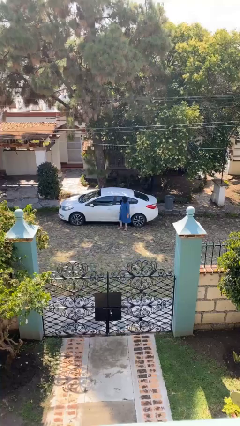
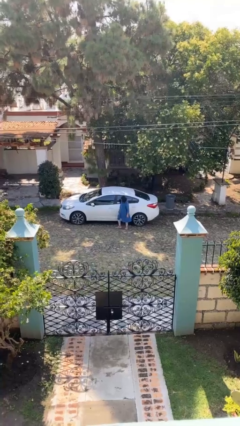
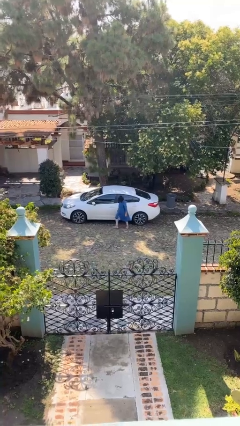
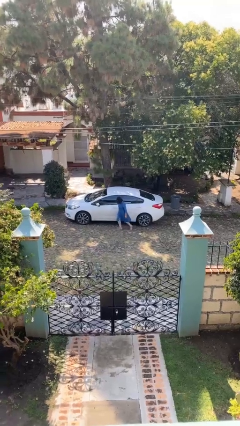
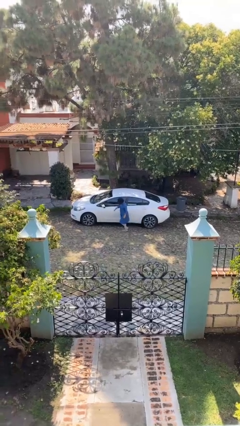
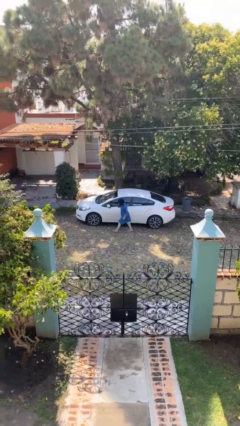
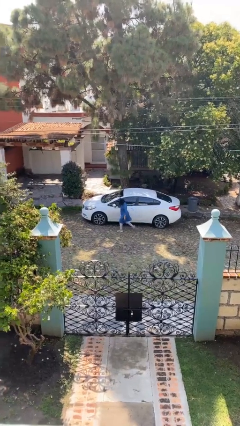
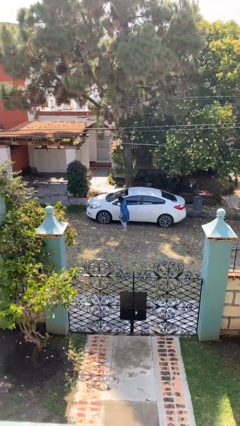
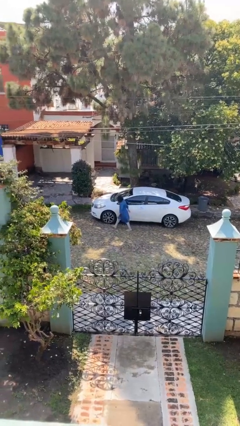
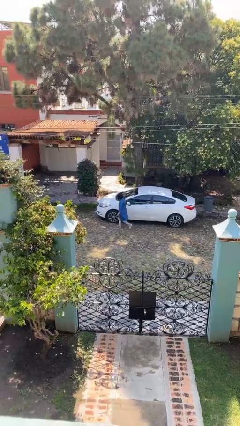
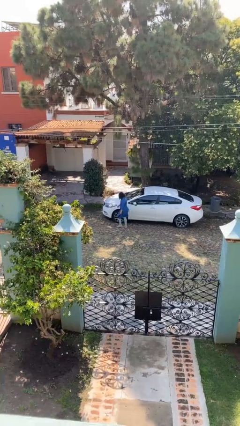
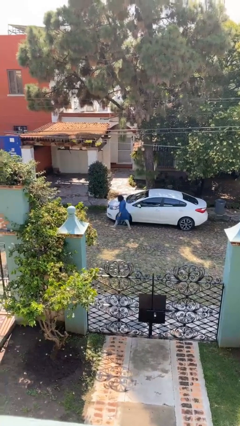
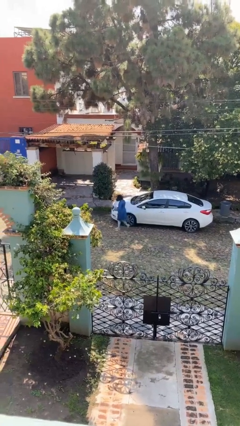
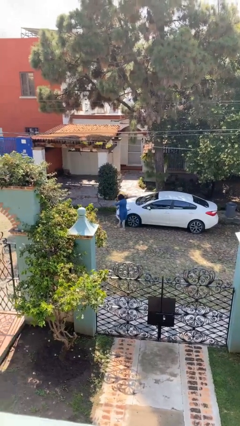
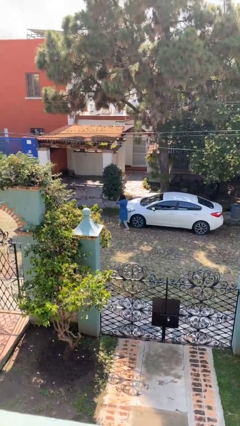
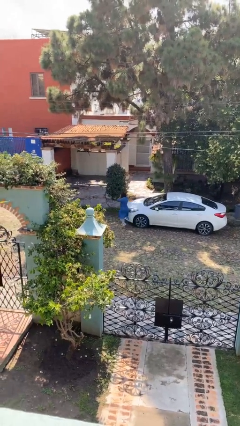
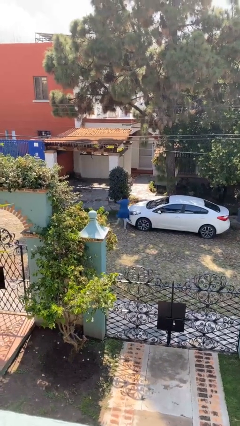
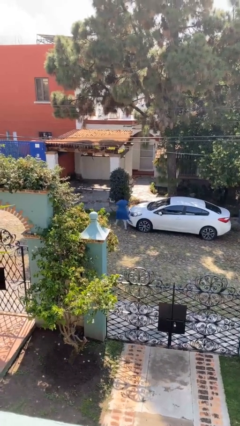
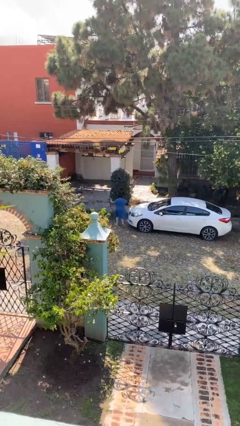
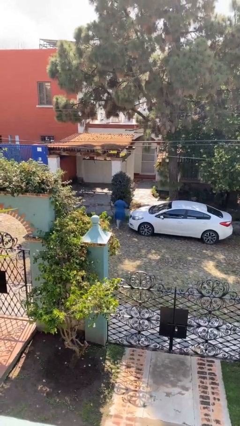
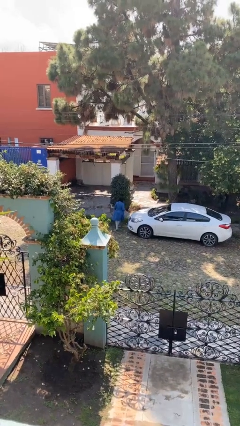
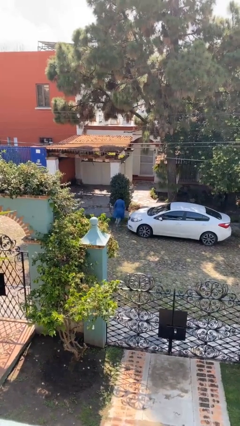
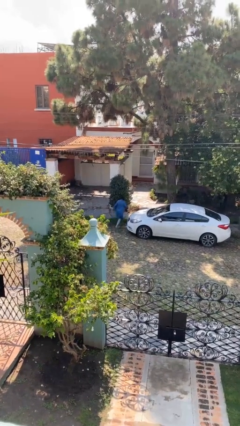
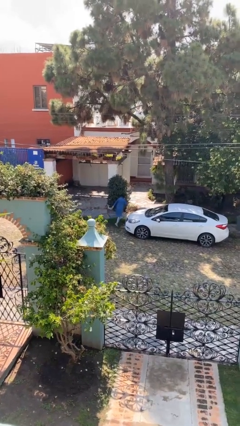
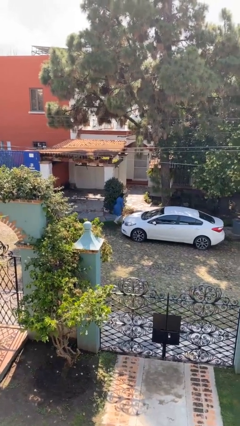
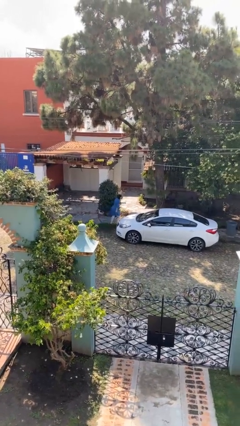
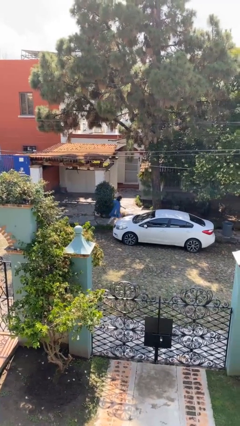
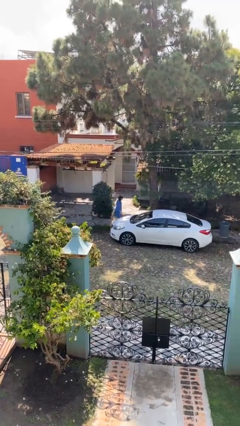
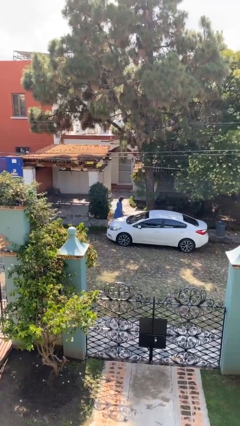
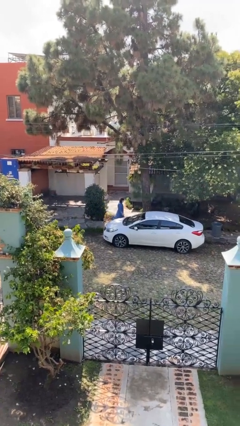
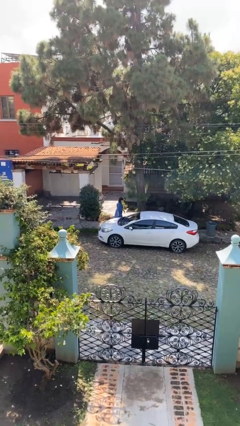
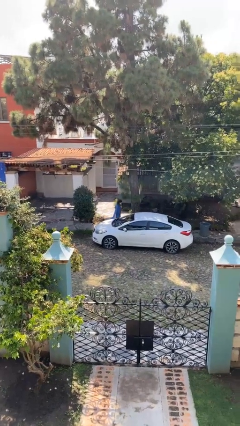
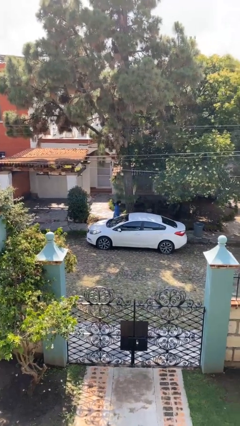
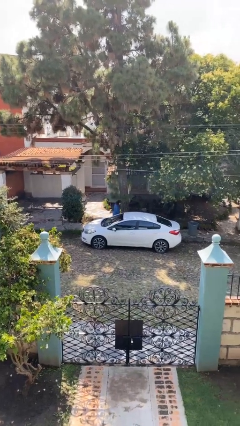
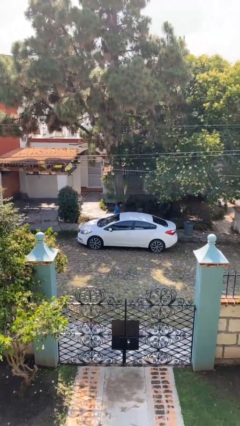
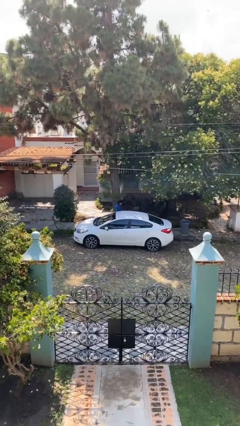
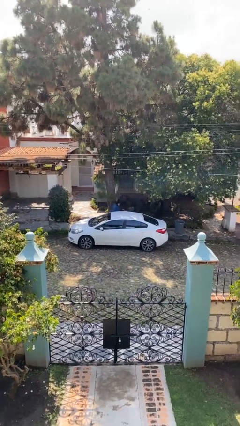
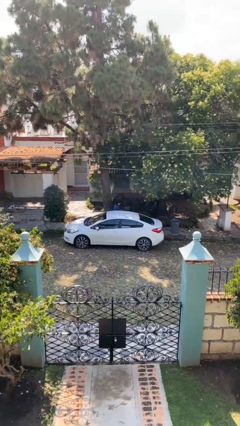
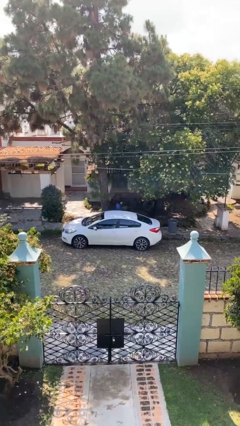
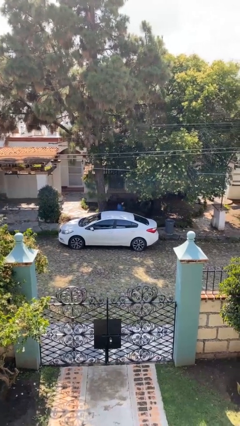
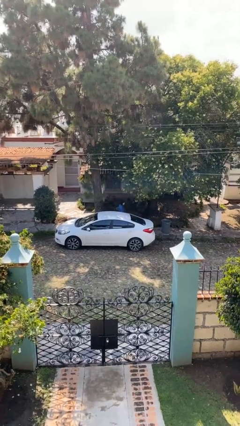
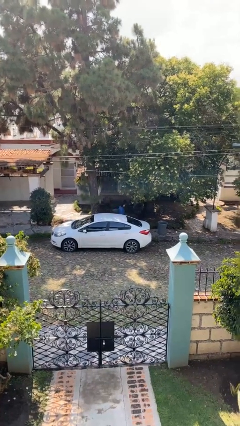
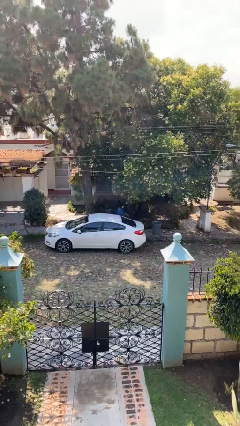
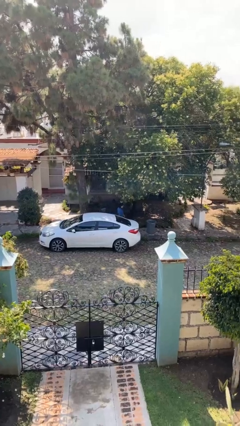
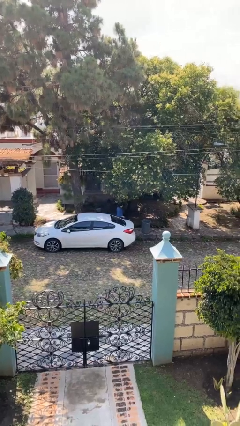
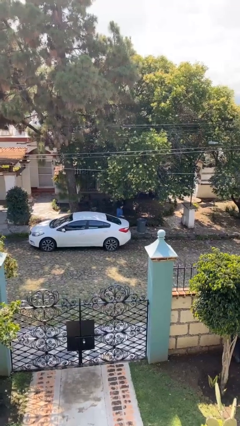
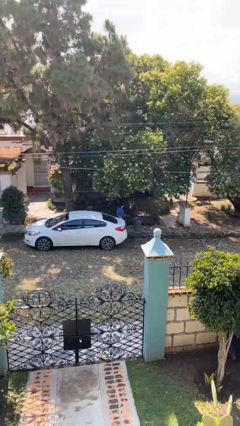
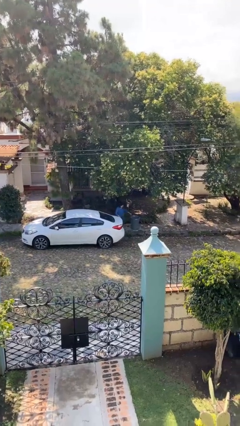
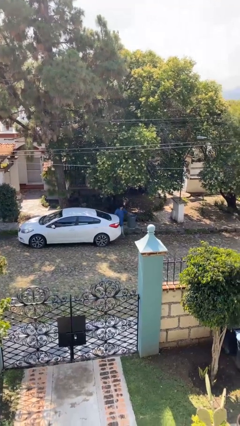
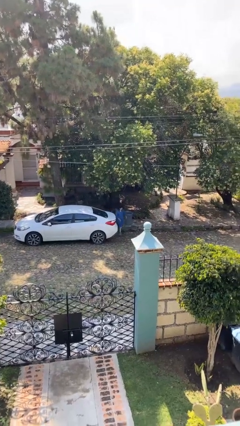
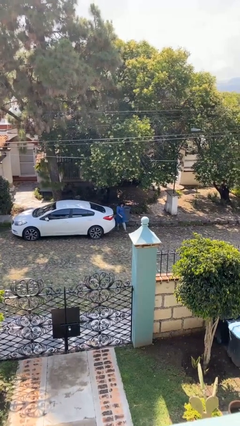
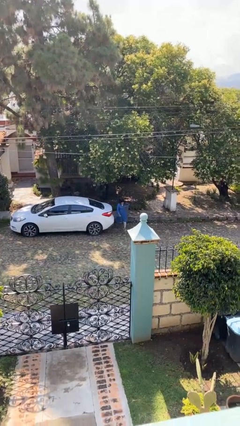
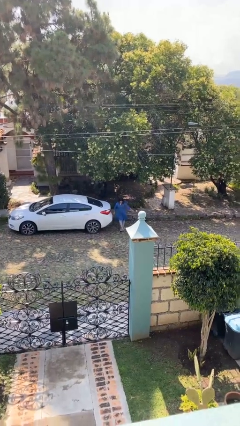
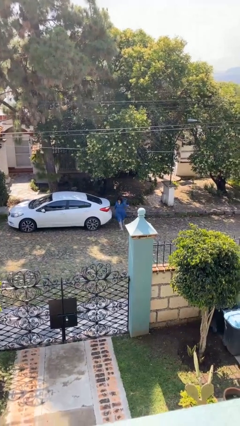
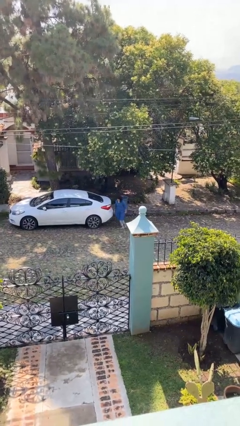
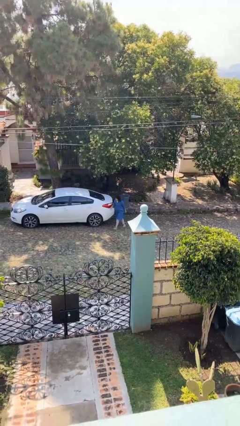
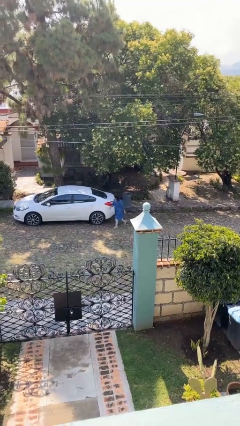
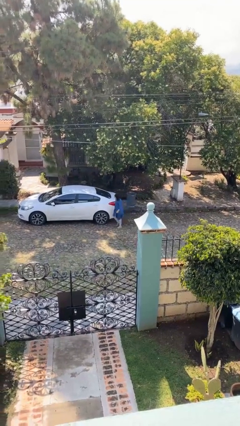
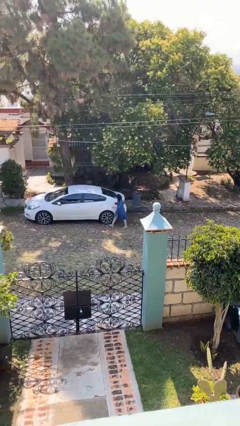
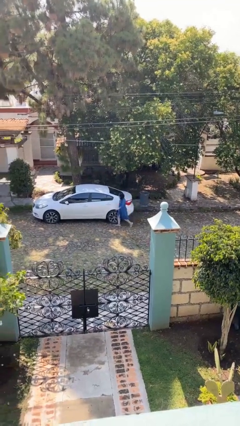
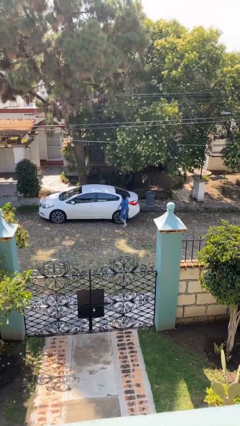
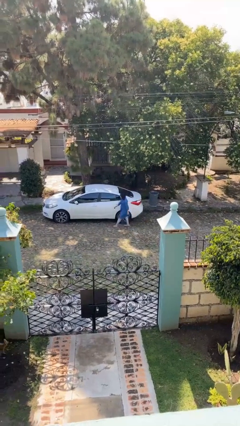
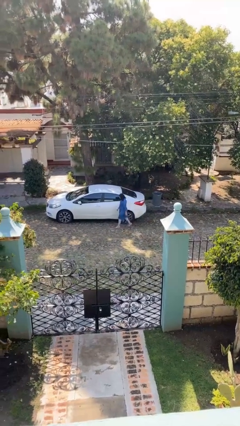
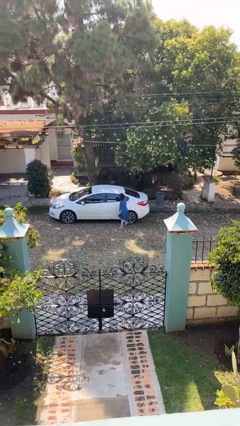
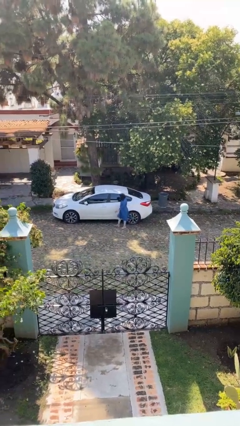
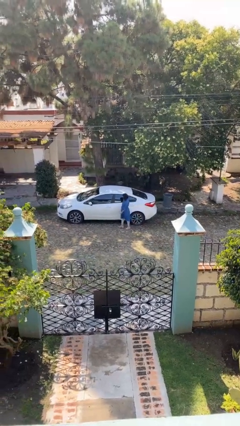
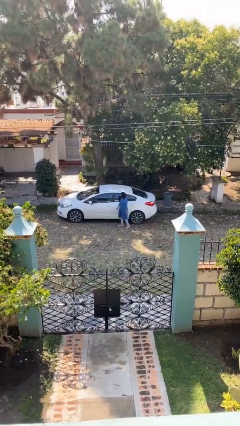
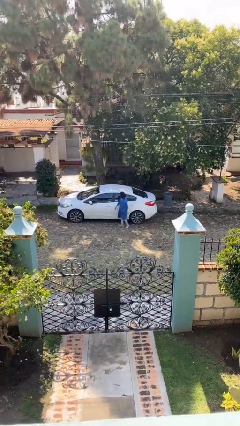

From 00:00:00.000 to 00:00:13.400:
person walks around car

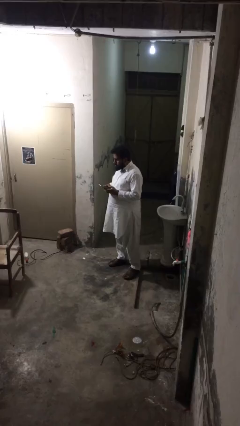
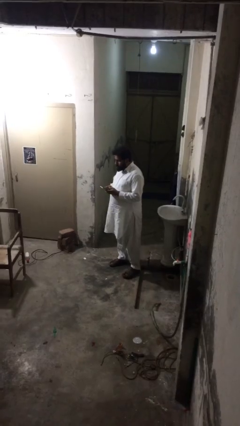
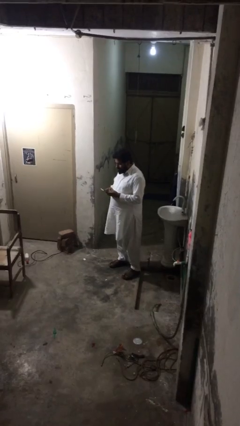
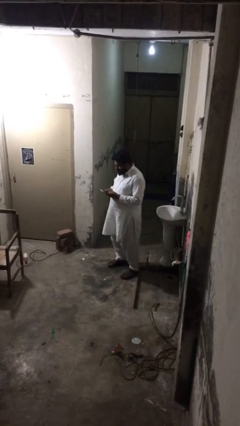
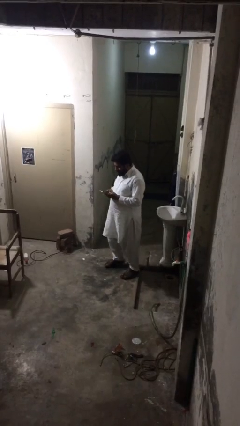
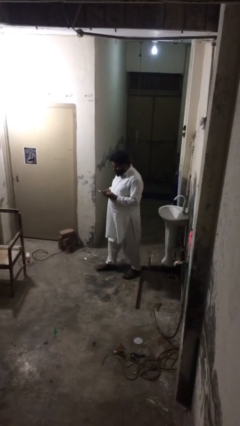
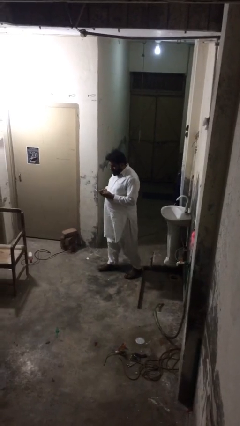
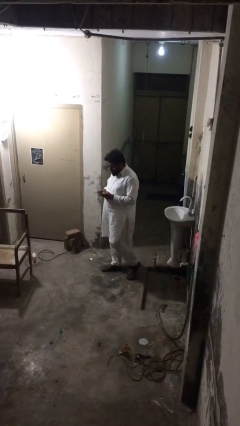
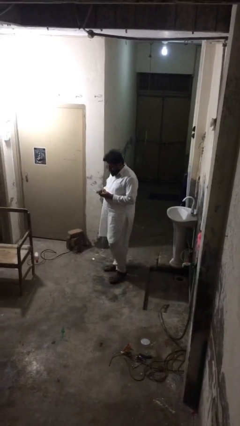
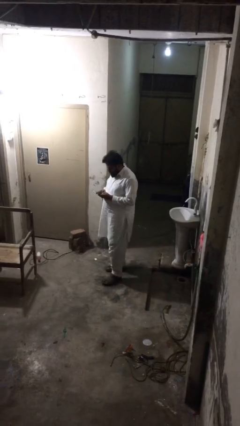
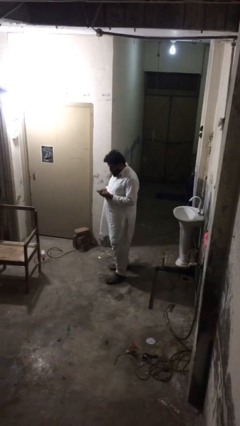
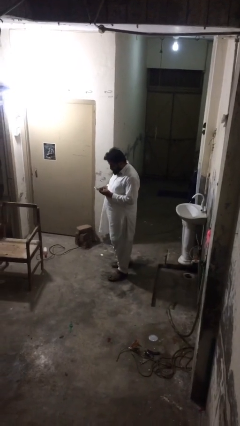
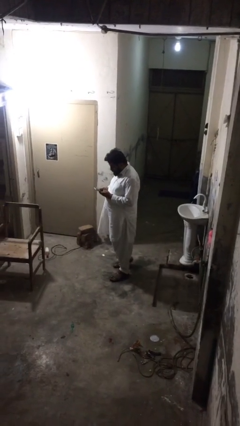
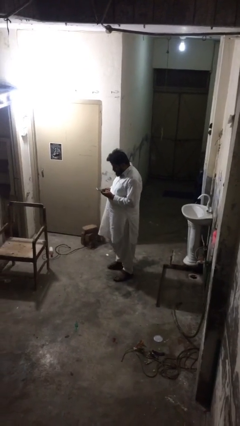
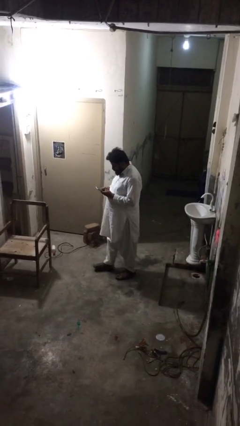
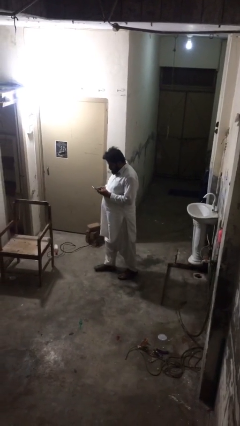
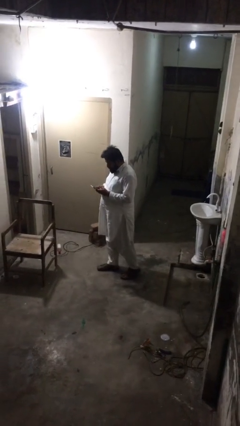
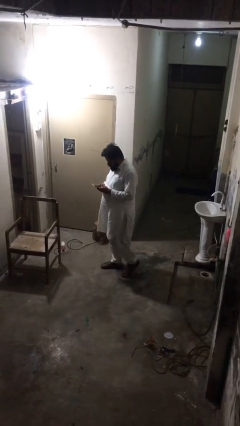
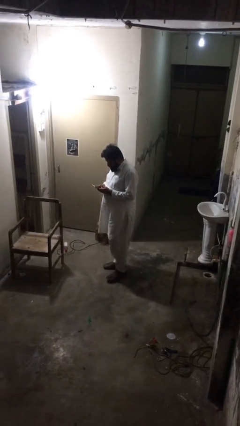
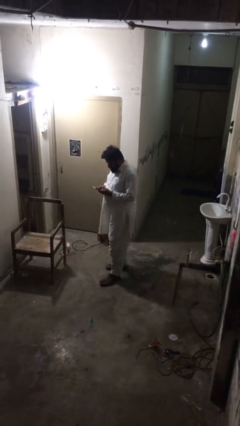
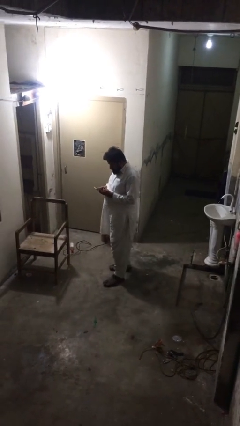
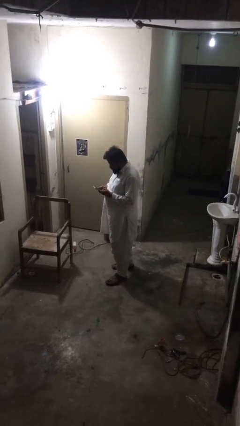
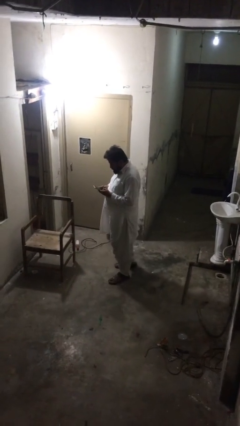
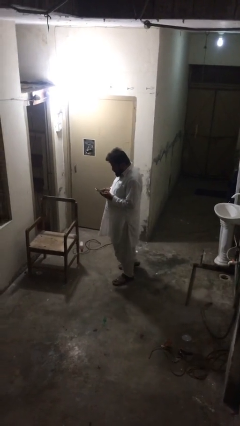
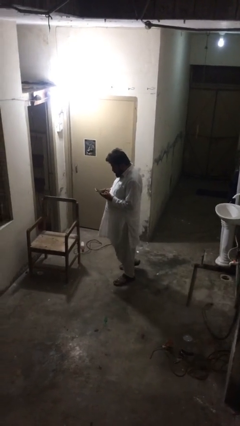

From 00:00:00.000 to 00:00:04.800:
person texts on phone
